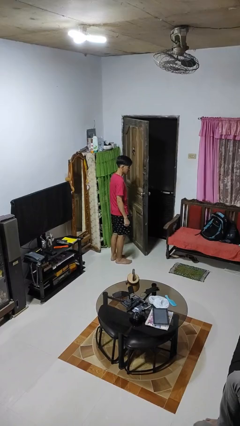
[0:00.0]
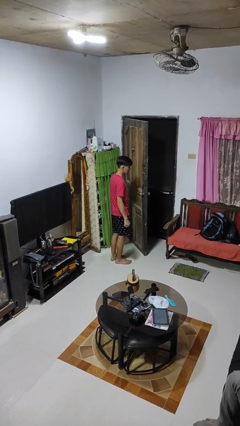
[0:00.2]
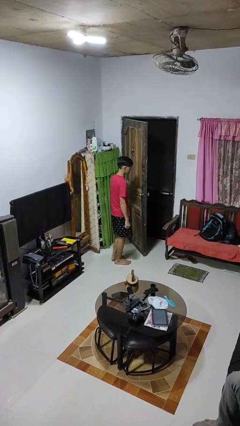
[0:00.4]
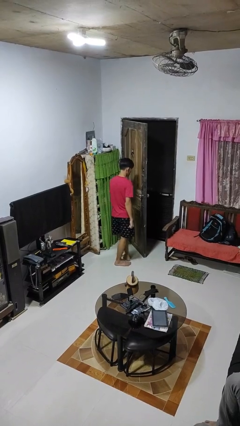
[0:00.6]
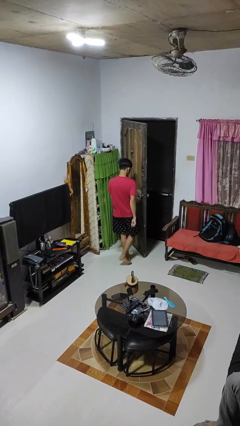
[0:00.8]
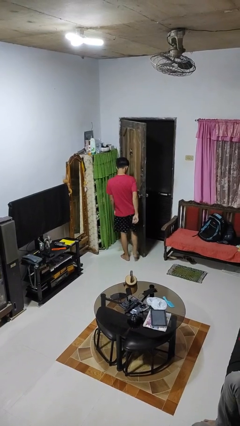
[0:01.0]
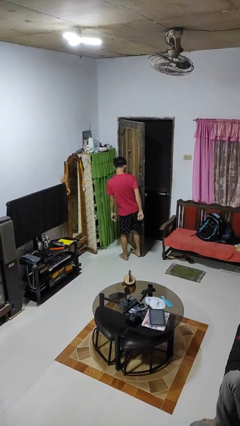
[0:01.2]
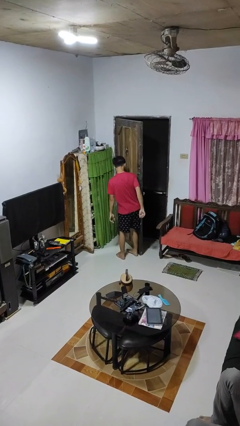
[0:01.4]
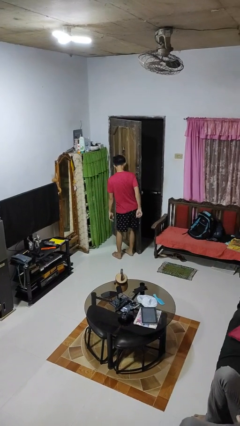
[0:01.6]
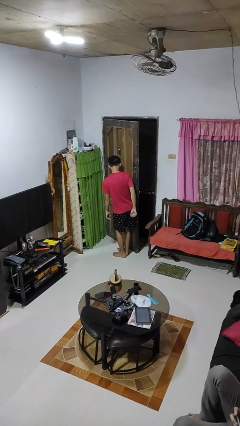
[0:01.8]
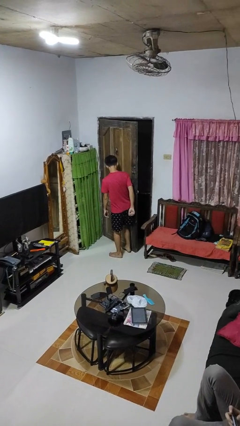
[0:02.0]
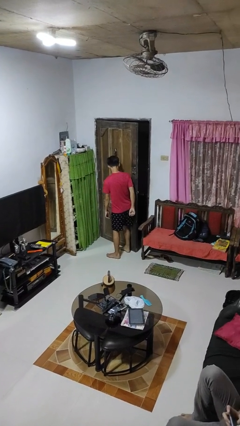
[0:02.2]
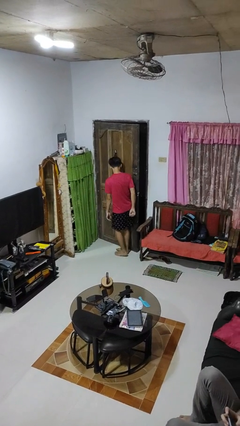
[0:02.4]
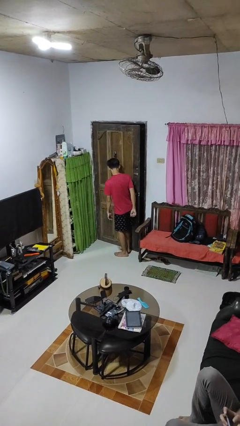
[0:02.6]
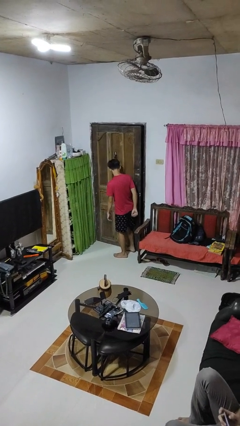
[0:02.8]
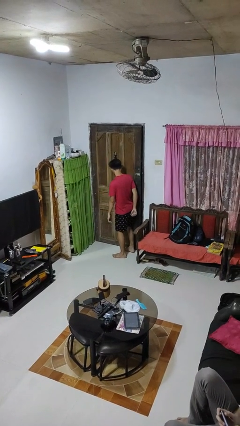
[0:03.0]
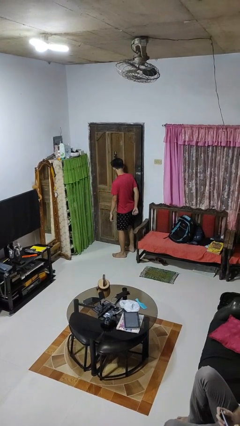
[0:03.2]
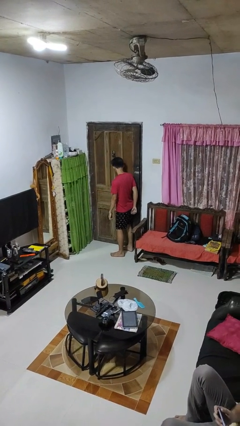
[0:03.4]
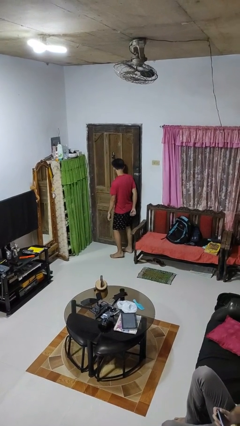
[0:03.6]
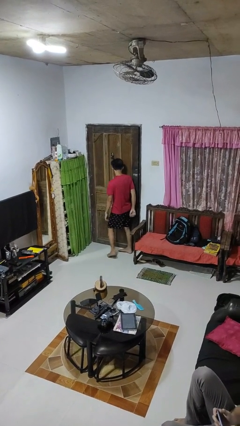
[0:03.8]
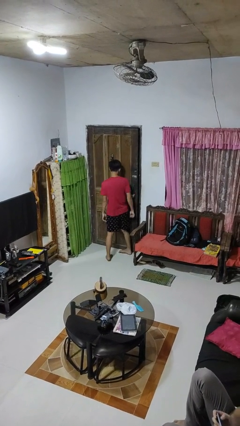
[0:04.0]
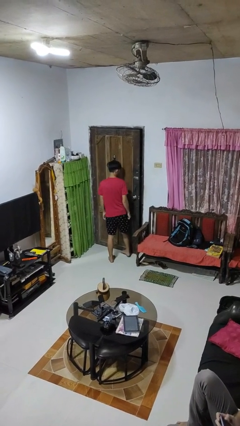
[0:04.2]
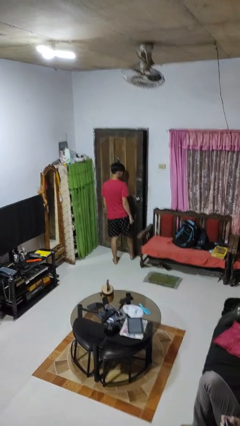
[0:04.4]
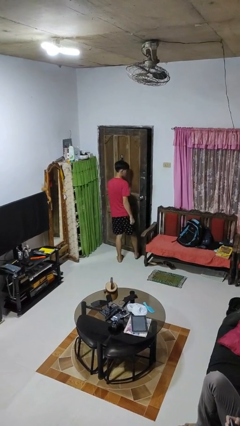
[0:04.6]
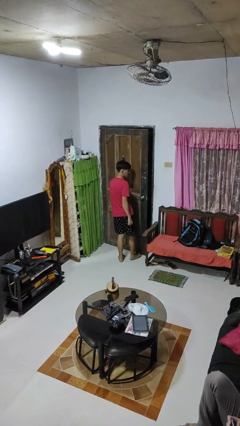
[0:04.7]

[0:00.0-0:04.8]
person closes door with hip

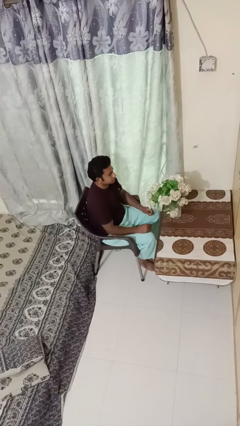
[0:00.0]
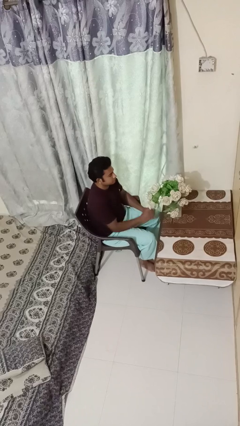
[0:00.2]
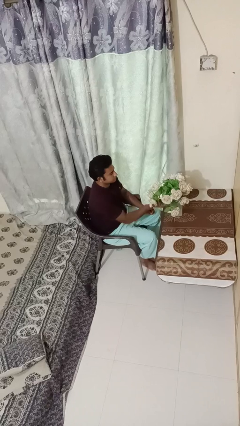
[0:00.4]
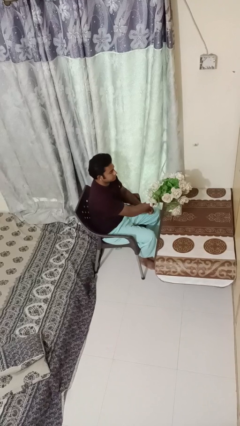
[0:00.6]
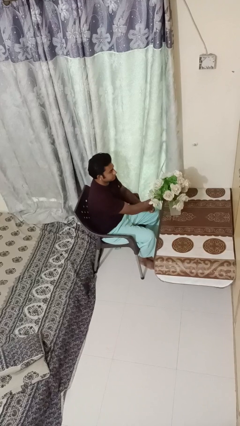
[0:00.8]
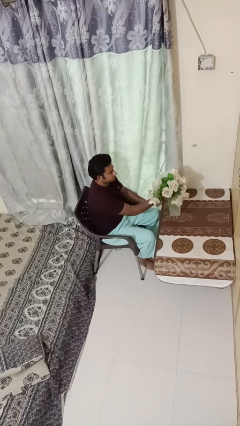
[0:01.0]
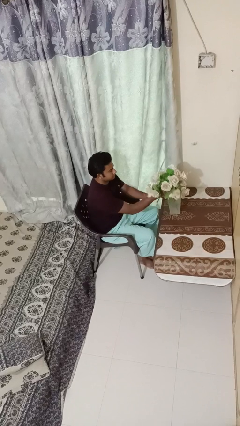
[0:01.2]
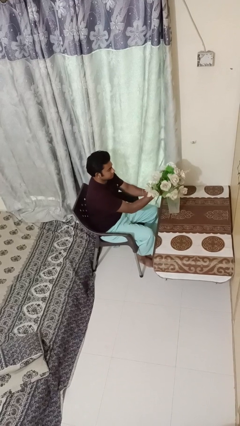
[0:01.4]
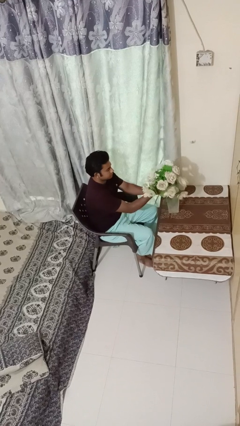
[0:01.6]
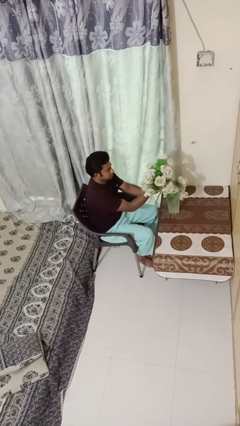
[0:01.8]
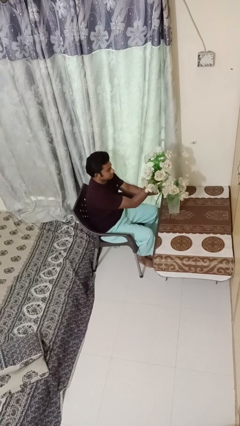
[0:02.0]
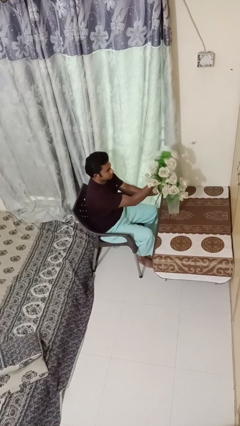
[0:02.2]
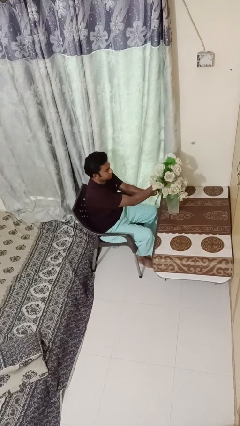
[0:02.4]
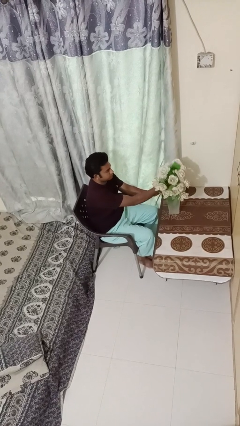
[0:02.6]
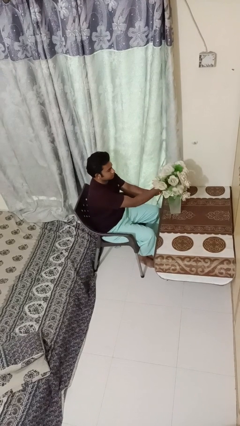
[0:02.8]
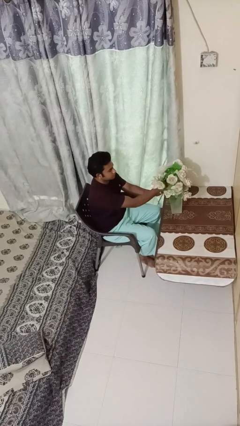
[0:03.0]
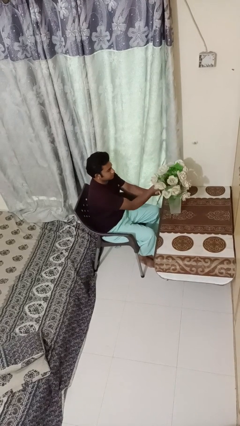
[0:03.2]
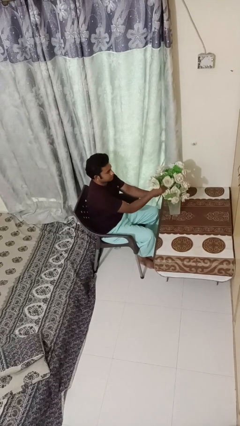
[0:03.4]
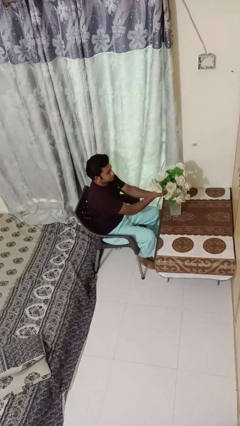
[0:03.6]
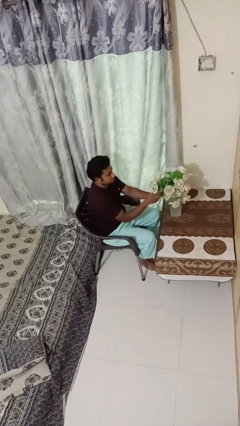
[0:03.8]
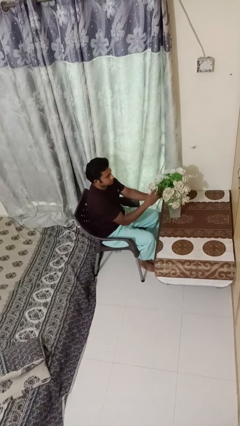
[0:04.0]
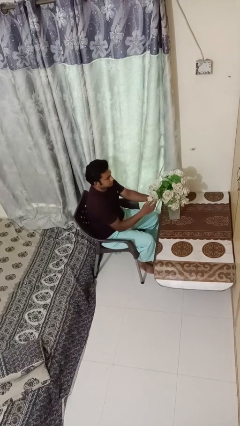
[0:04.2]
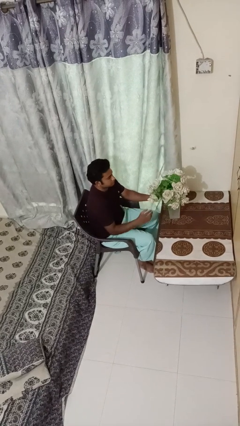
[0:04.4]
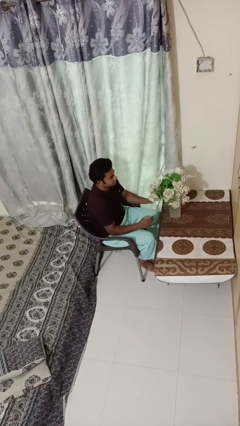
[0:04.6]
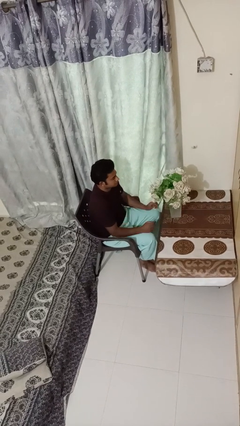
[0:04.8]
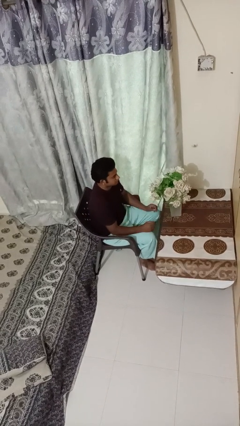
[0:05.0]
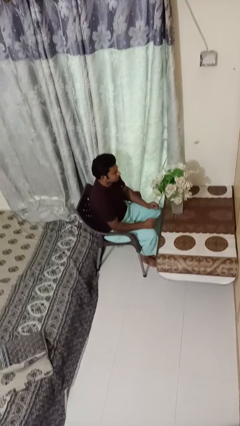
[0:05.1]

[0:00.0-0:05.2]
person arranges flowers in vase

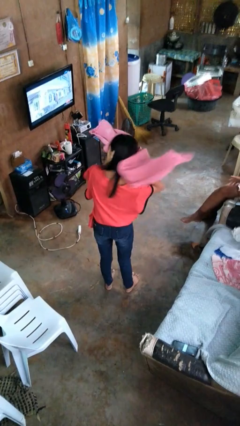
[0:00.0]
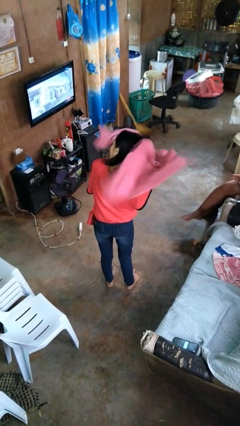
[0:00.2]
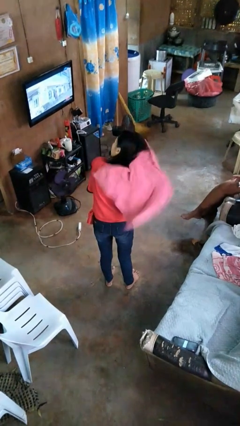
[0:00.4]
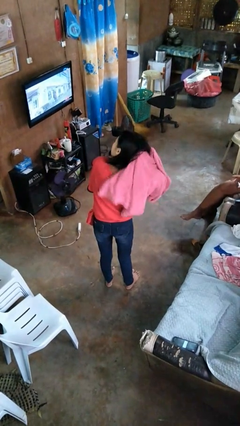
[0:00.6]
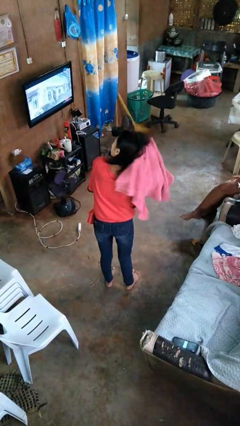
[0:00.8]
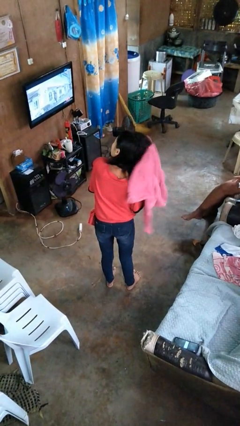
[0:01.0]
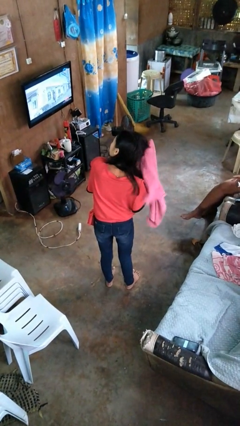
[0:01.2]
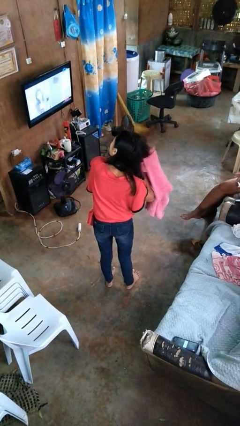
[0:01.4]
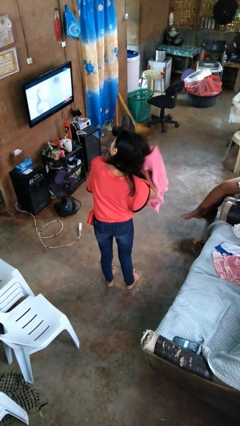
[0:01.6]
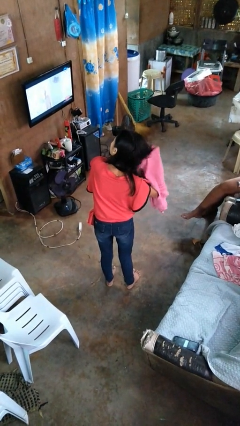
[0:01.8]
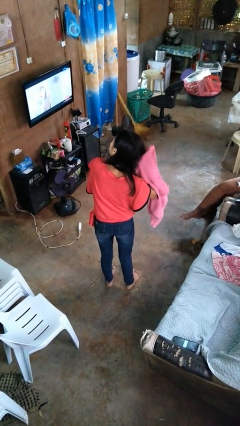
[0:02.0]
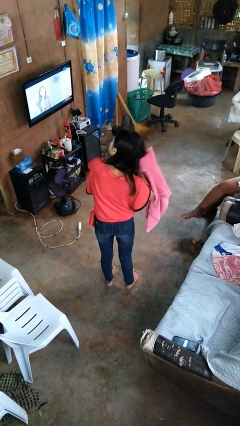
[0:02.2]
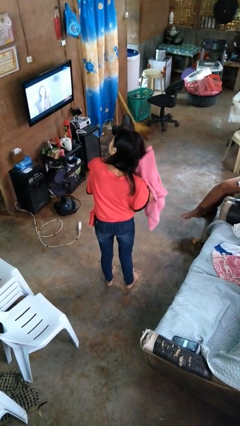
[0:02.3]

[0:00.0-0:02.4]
person dries hair with towel

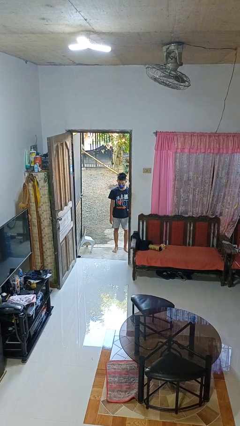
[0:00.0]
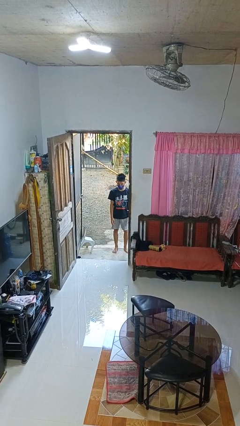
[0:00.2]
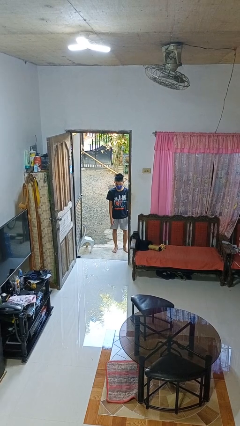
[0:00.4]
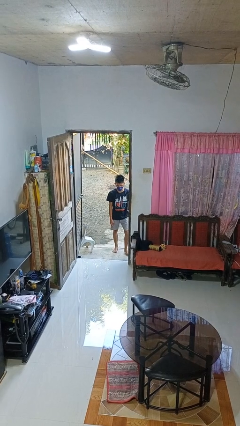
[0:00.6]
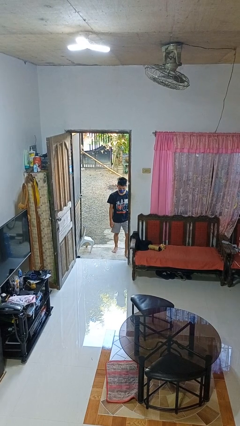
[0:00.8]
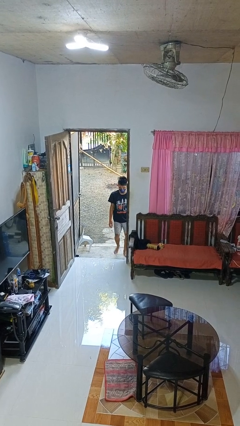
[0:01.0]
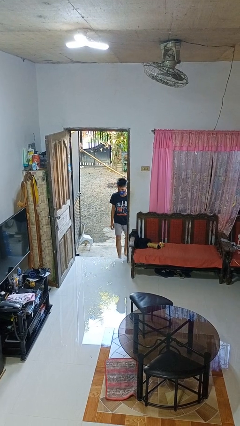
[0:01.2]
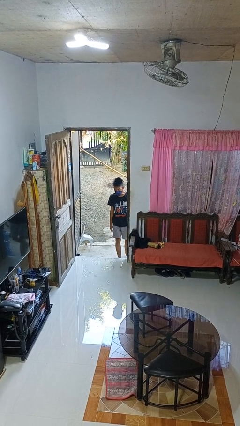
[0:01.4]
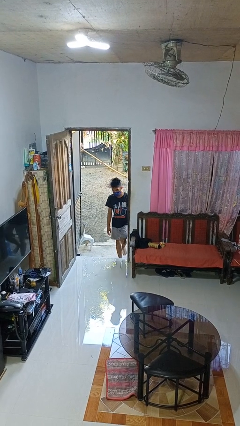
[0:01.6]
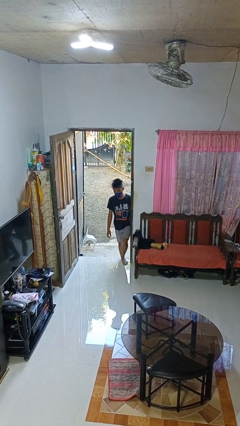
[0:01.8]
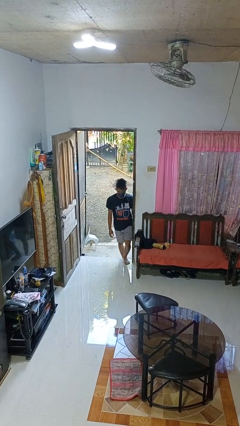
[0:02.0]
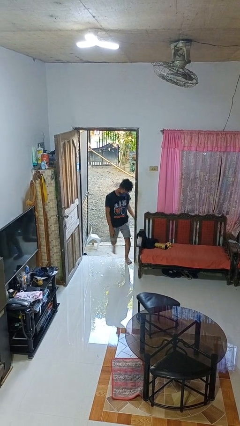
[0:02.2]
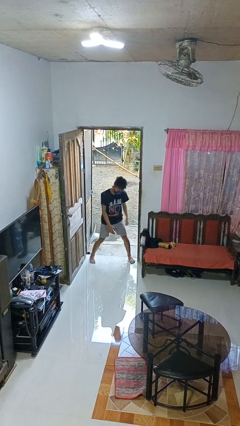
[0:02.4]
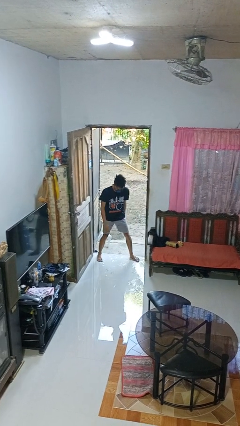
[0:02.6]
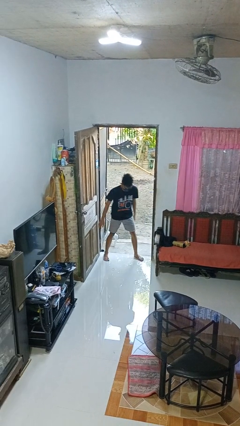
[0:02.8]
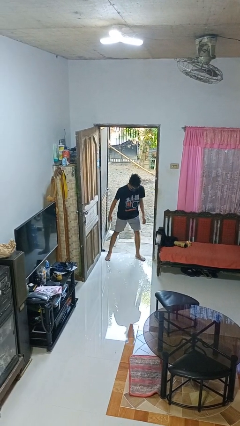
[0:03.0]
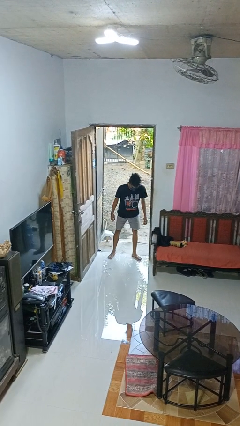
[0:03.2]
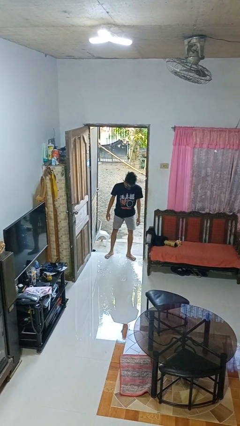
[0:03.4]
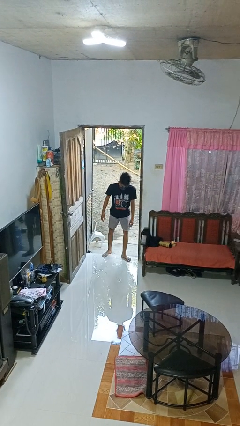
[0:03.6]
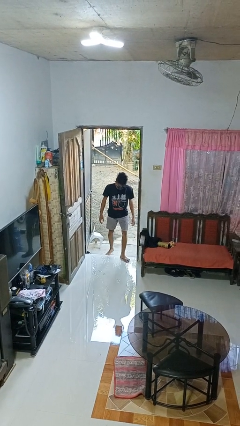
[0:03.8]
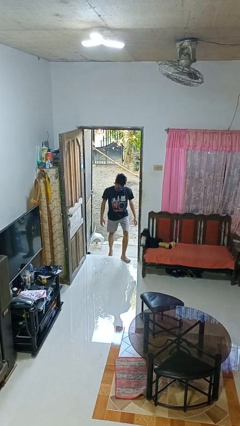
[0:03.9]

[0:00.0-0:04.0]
person bumps into wall

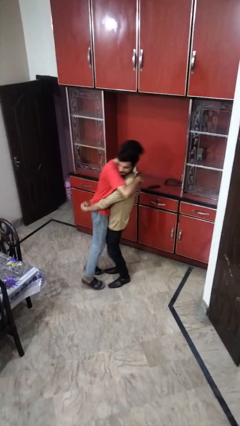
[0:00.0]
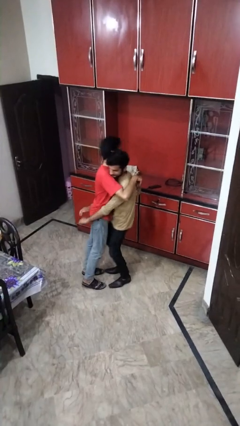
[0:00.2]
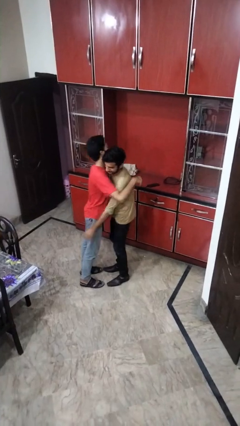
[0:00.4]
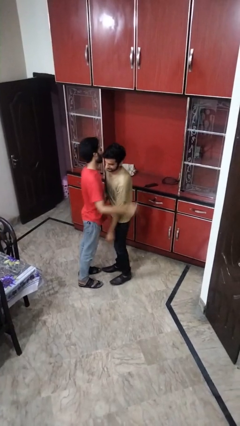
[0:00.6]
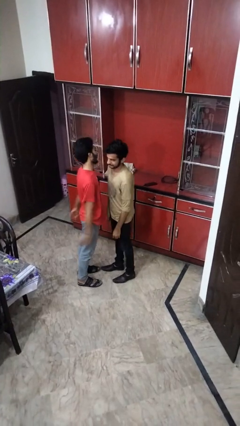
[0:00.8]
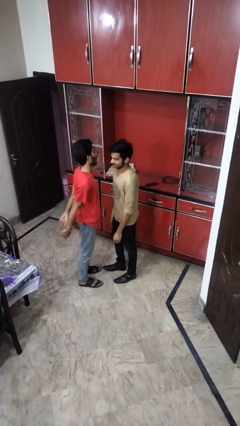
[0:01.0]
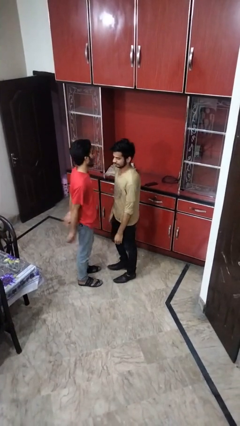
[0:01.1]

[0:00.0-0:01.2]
person puts down person
